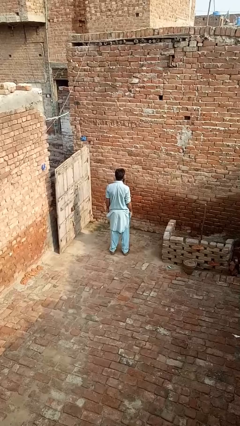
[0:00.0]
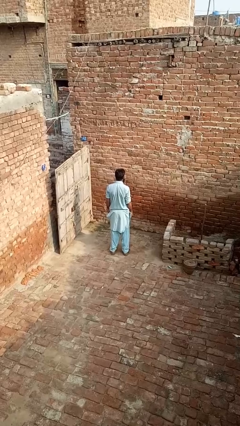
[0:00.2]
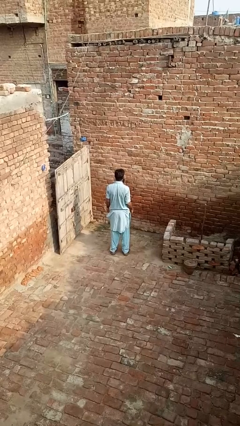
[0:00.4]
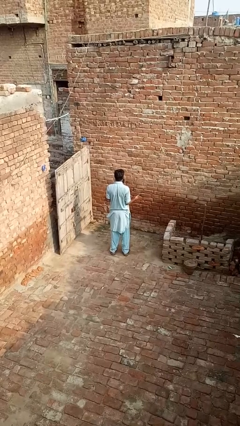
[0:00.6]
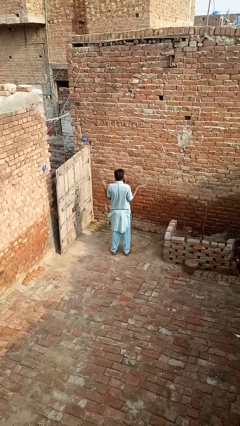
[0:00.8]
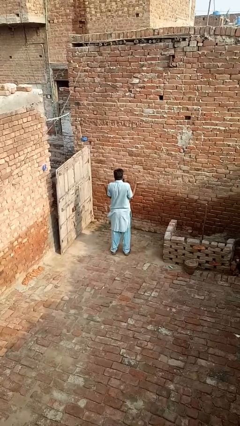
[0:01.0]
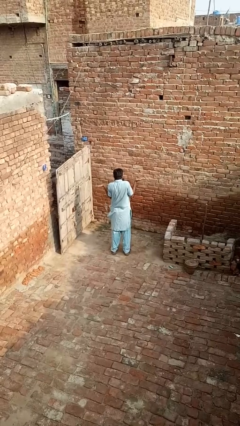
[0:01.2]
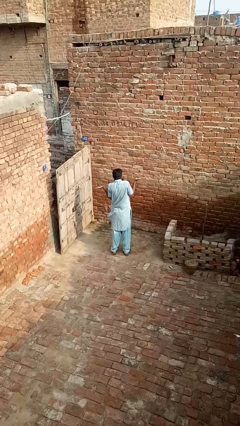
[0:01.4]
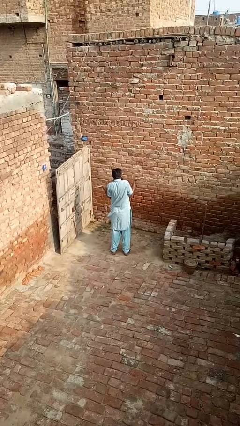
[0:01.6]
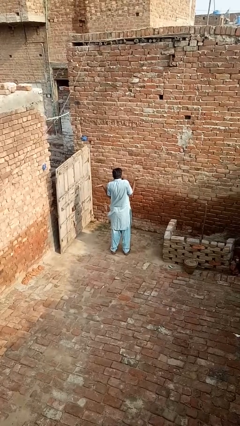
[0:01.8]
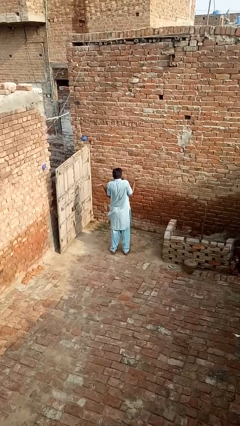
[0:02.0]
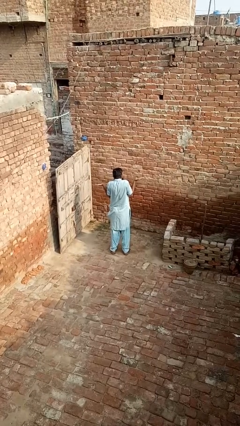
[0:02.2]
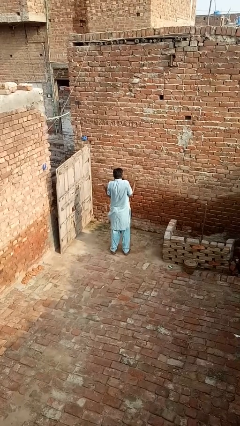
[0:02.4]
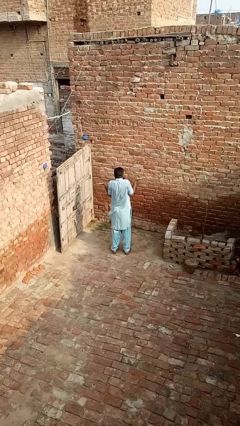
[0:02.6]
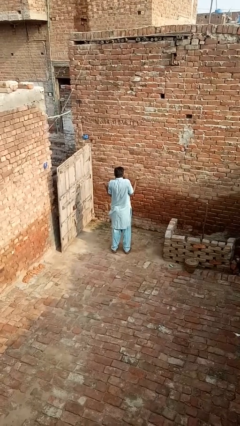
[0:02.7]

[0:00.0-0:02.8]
person shrugs

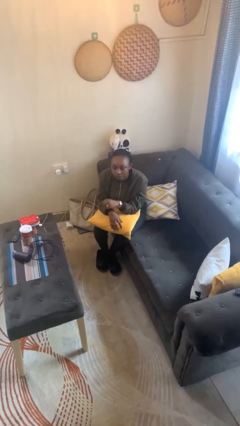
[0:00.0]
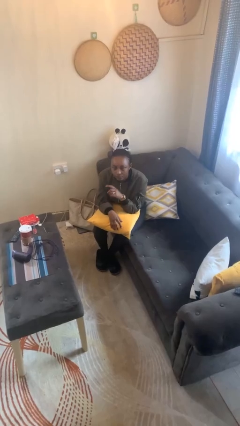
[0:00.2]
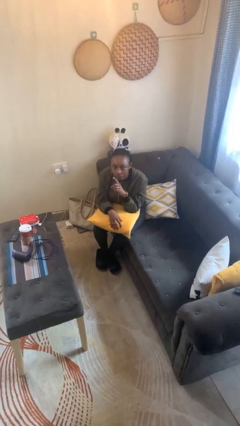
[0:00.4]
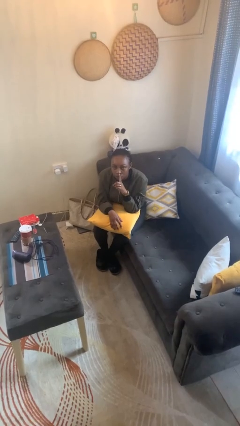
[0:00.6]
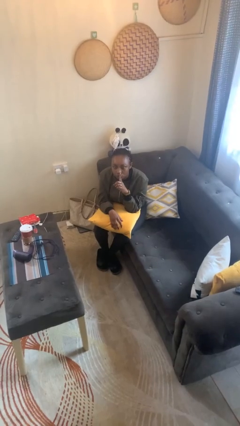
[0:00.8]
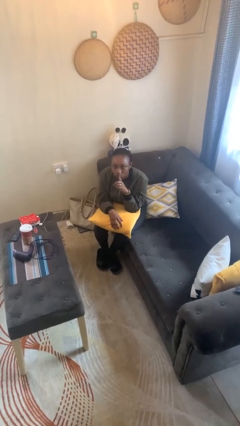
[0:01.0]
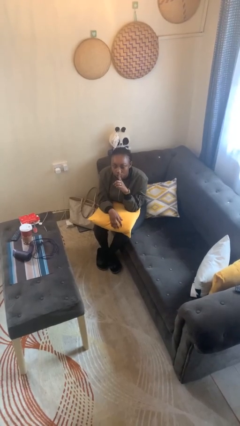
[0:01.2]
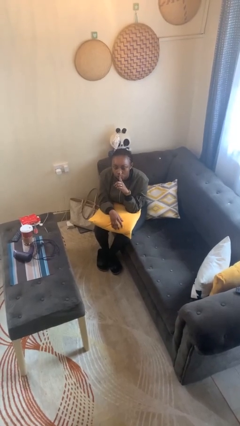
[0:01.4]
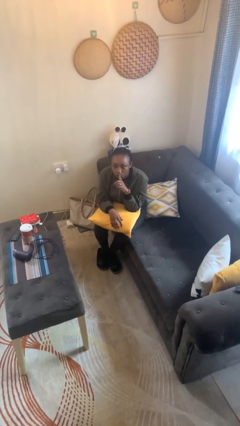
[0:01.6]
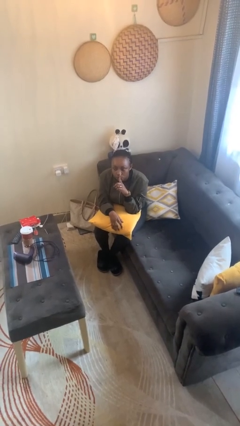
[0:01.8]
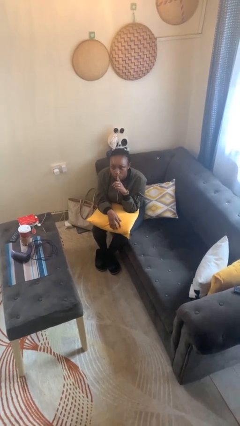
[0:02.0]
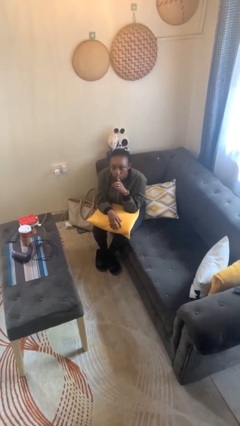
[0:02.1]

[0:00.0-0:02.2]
person gestures be quiet

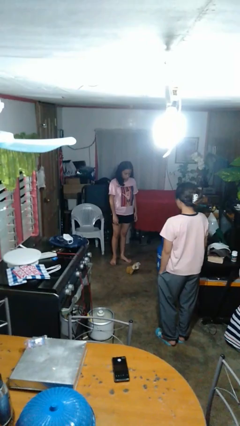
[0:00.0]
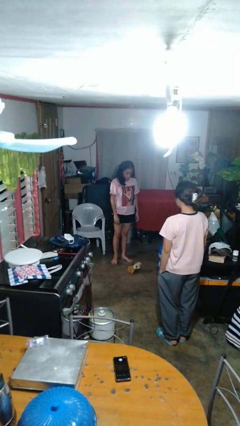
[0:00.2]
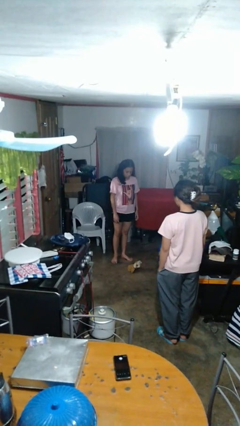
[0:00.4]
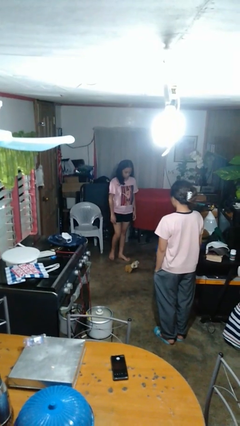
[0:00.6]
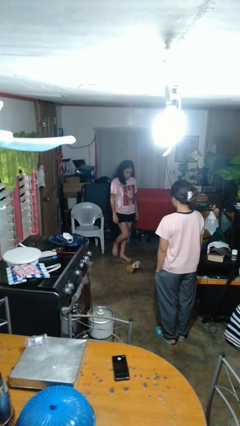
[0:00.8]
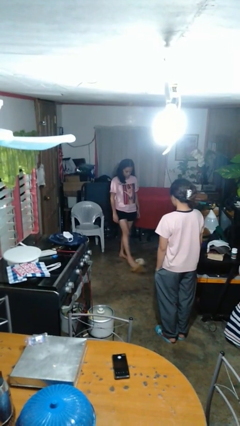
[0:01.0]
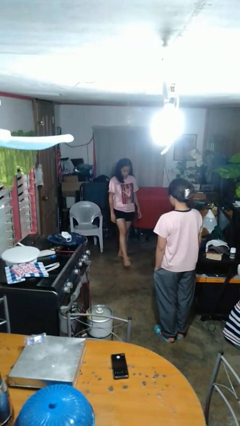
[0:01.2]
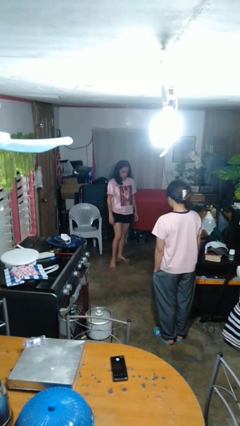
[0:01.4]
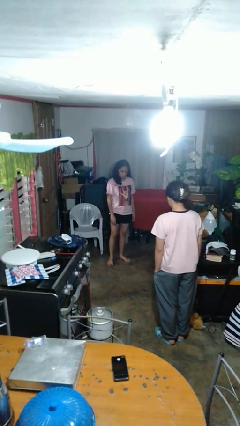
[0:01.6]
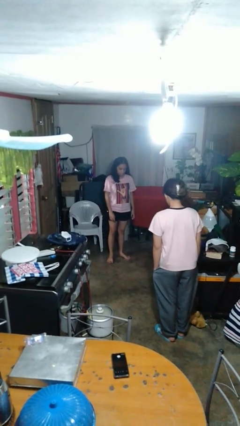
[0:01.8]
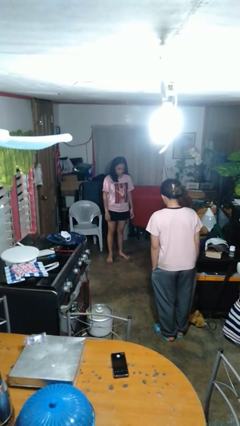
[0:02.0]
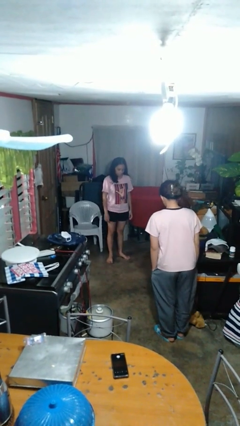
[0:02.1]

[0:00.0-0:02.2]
person kicks object to person

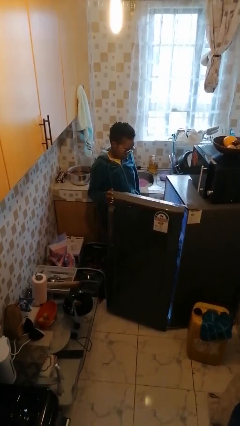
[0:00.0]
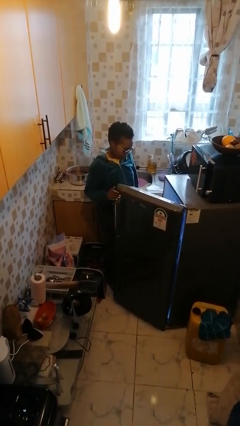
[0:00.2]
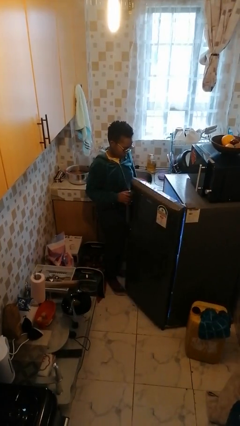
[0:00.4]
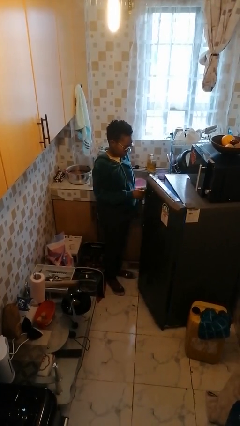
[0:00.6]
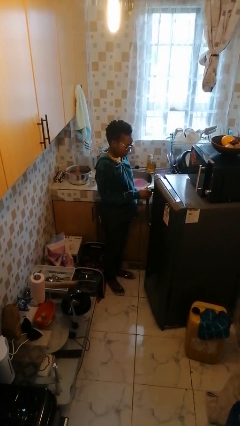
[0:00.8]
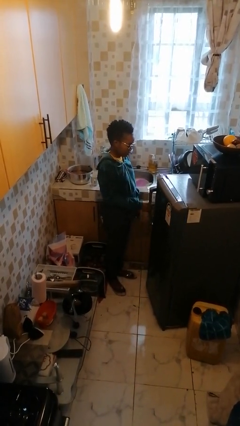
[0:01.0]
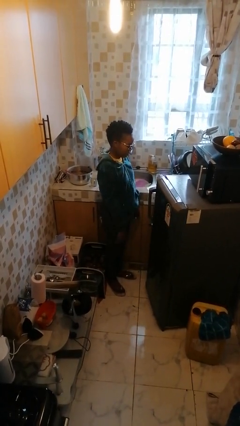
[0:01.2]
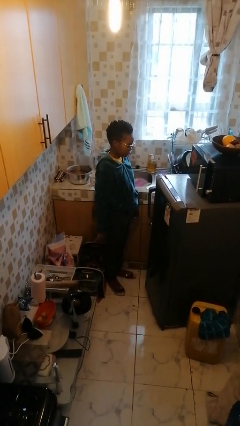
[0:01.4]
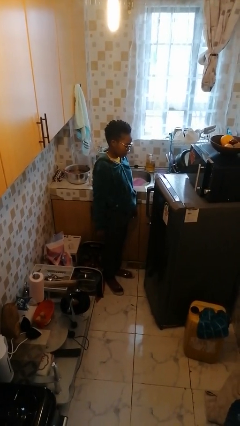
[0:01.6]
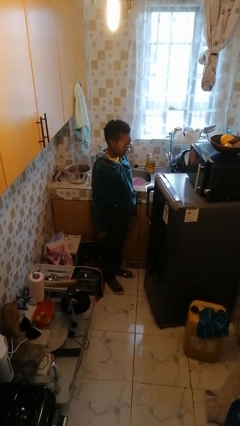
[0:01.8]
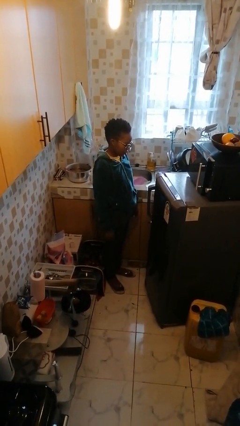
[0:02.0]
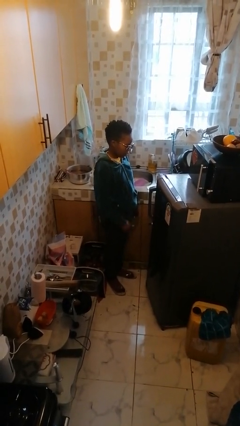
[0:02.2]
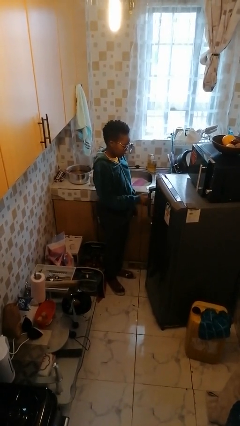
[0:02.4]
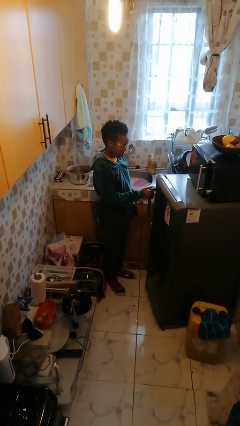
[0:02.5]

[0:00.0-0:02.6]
person closes refrigerator

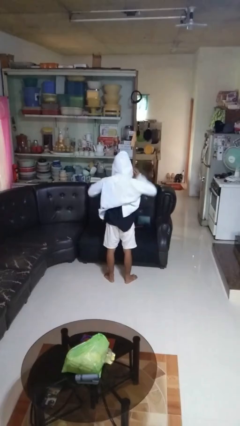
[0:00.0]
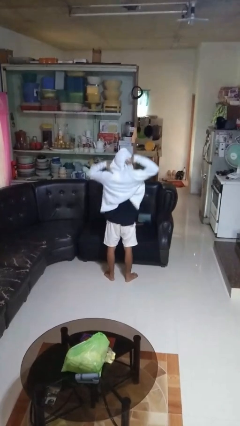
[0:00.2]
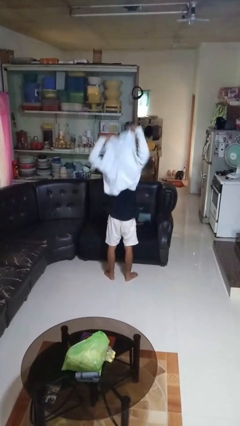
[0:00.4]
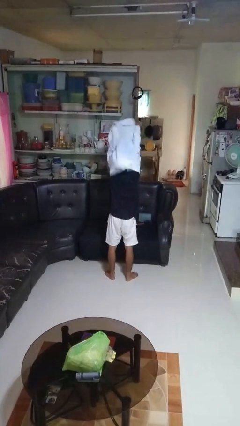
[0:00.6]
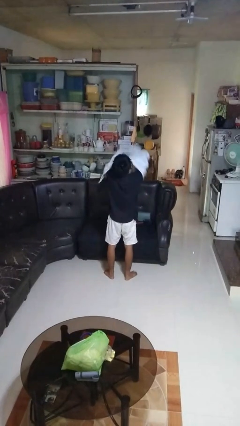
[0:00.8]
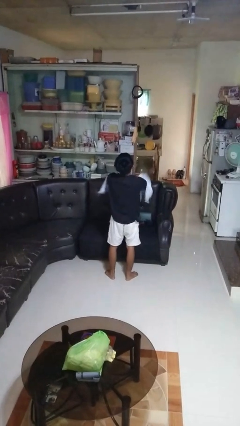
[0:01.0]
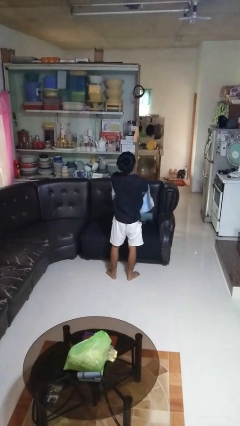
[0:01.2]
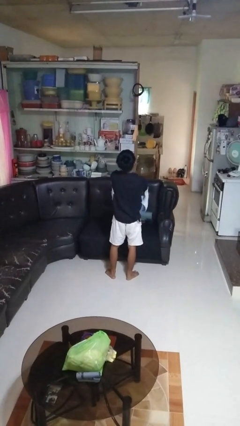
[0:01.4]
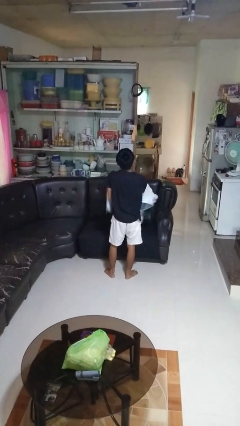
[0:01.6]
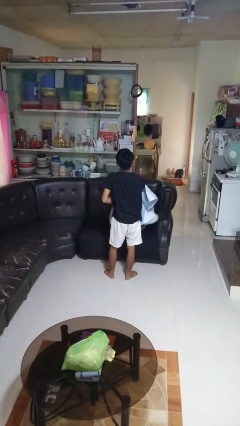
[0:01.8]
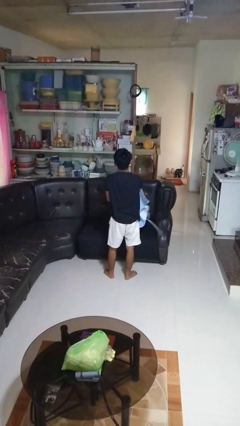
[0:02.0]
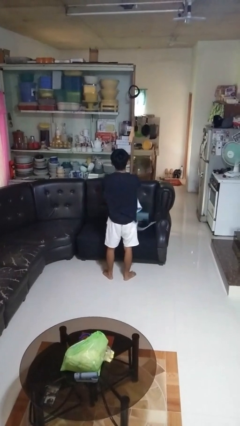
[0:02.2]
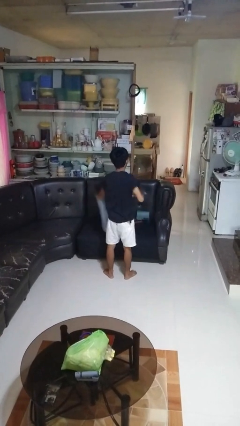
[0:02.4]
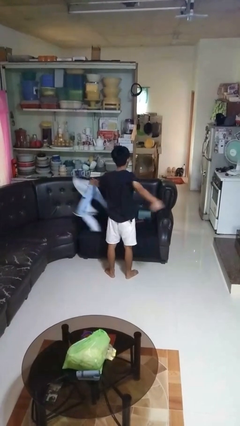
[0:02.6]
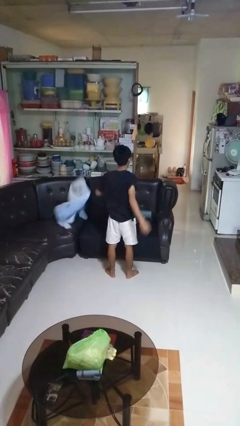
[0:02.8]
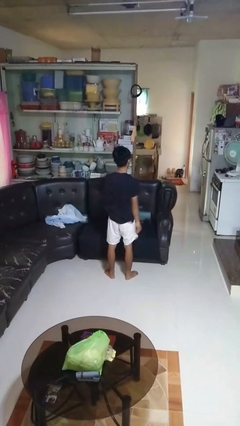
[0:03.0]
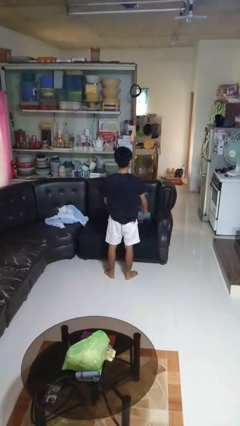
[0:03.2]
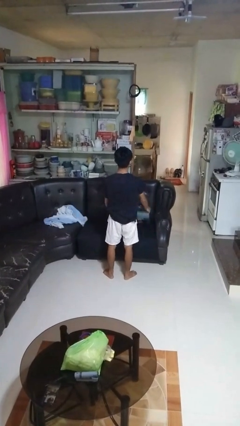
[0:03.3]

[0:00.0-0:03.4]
person takes off hoodie

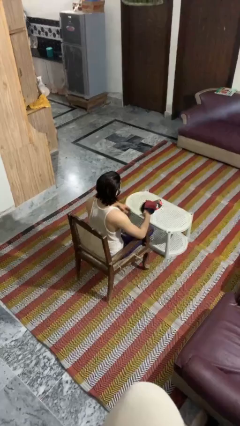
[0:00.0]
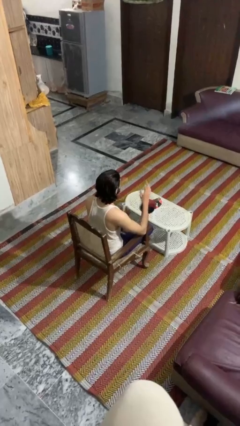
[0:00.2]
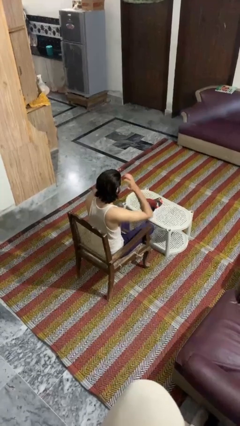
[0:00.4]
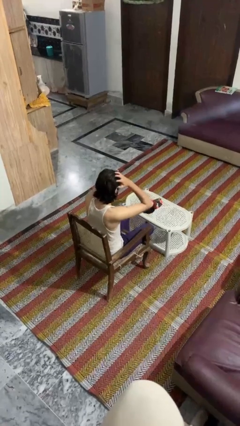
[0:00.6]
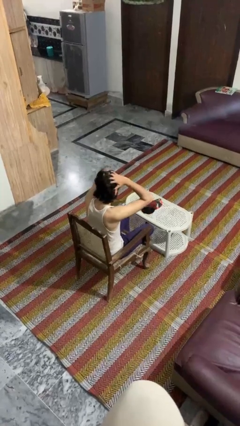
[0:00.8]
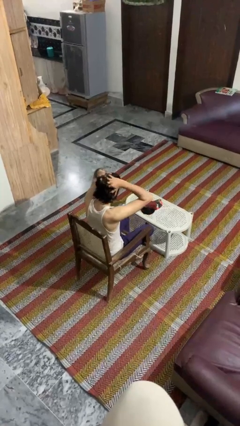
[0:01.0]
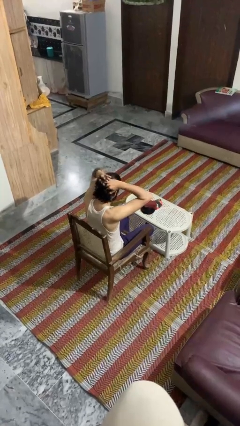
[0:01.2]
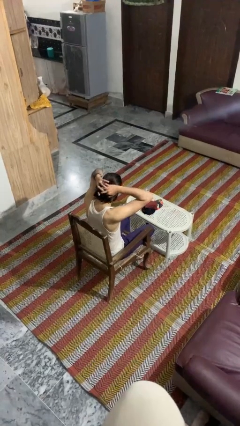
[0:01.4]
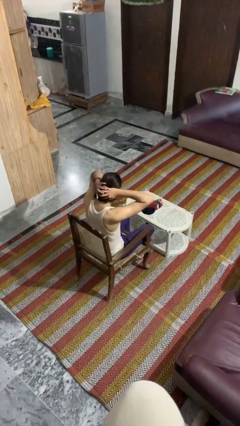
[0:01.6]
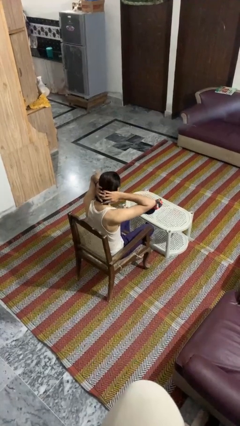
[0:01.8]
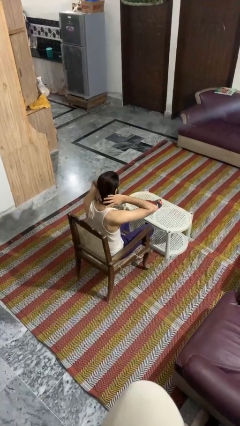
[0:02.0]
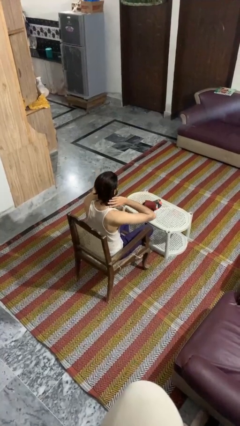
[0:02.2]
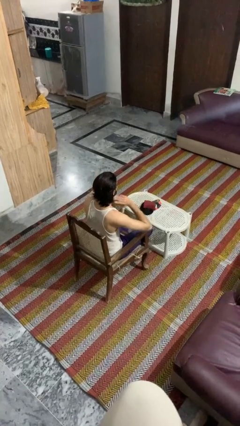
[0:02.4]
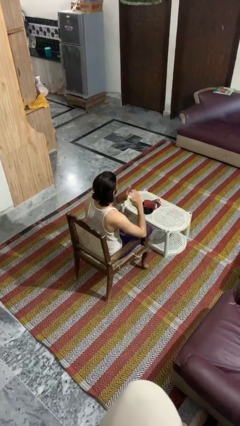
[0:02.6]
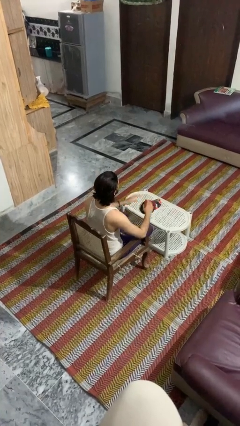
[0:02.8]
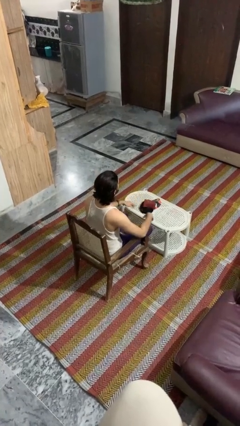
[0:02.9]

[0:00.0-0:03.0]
person strokes hair

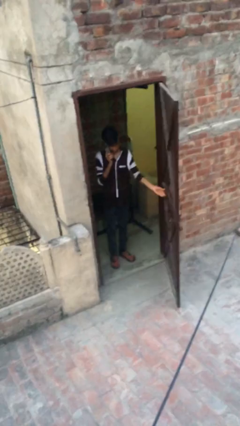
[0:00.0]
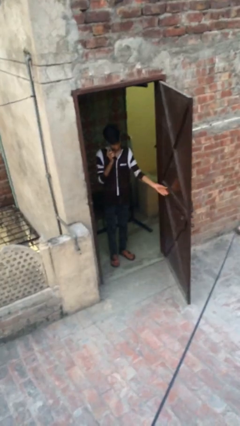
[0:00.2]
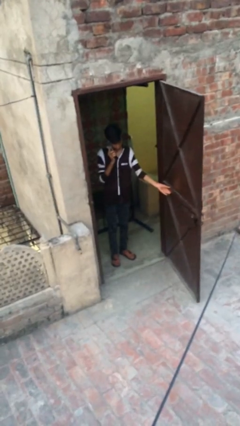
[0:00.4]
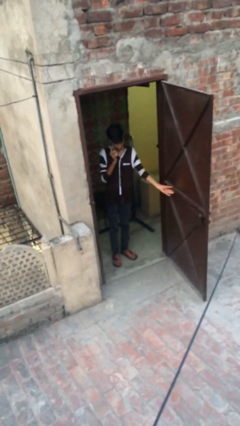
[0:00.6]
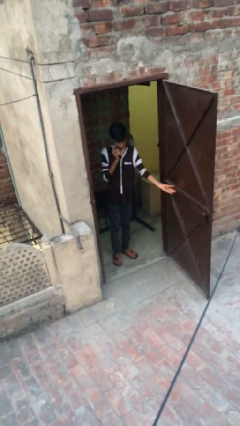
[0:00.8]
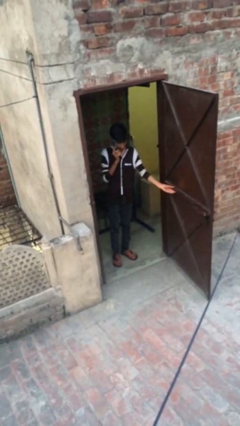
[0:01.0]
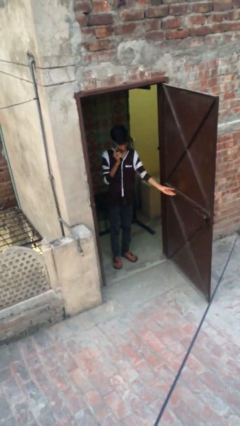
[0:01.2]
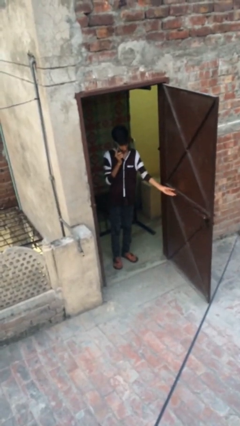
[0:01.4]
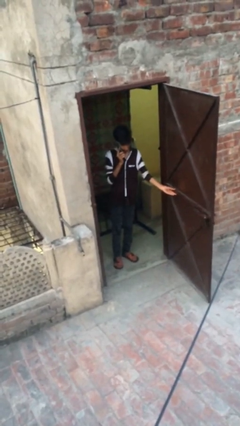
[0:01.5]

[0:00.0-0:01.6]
person opens facility door
